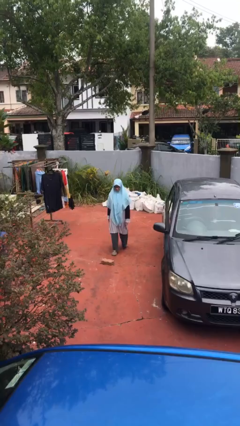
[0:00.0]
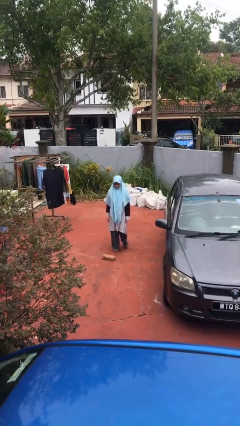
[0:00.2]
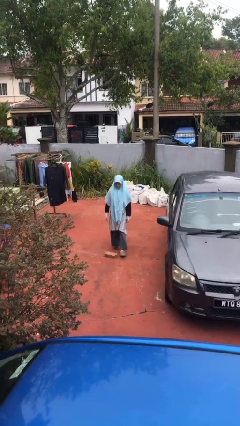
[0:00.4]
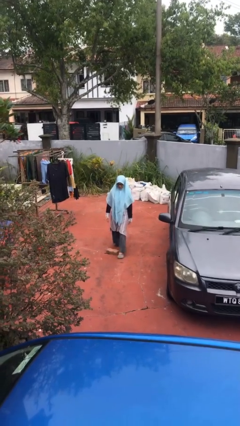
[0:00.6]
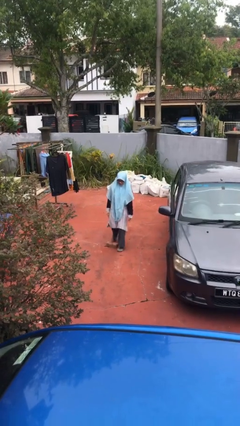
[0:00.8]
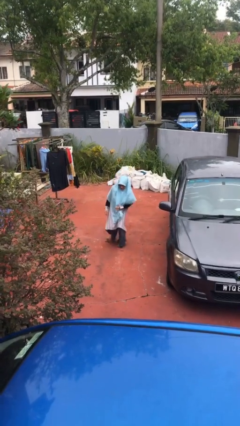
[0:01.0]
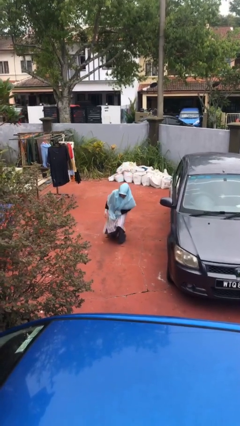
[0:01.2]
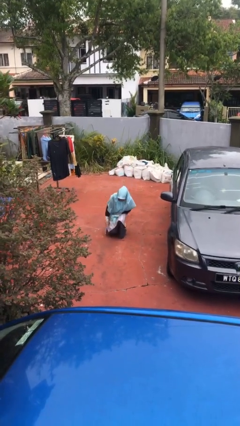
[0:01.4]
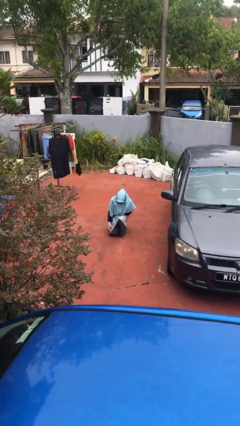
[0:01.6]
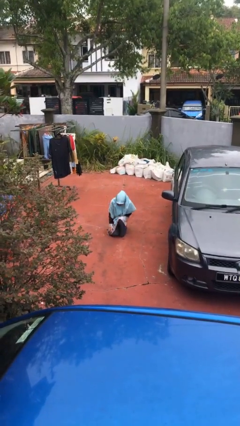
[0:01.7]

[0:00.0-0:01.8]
person trips on object on floor

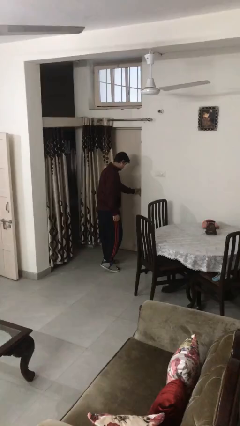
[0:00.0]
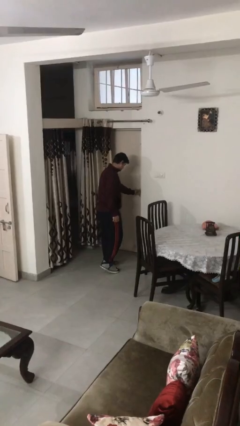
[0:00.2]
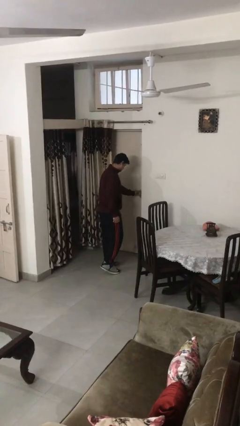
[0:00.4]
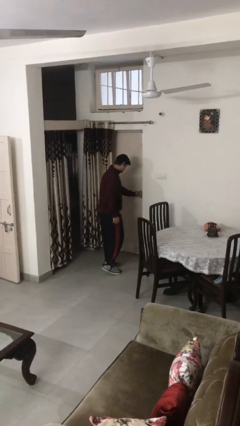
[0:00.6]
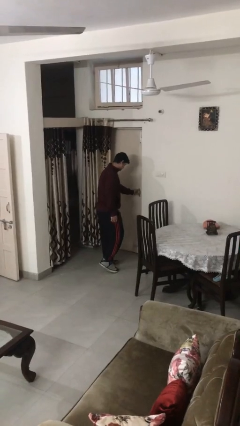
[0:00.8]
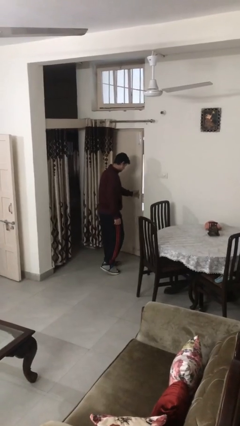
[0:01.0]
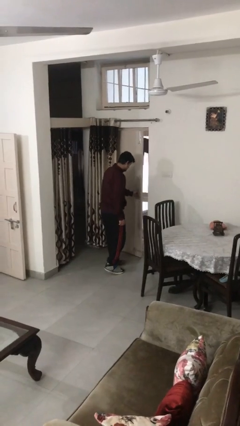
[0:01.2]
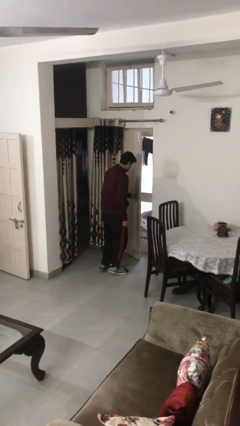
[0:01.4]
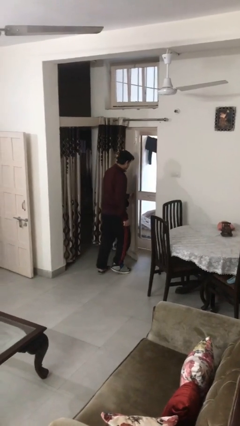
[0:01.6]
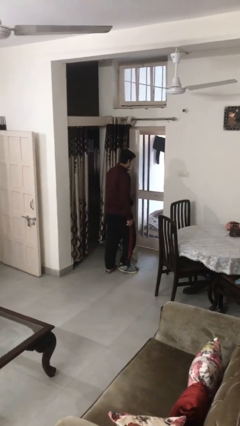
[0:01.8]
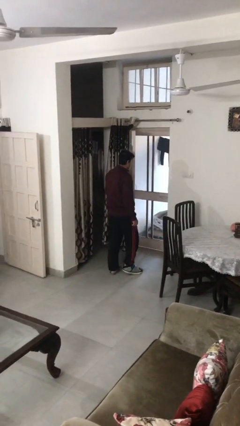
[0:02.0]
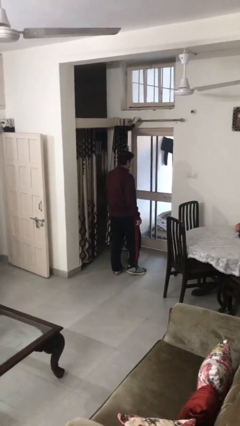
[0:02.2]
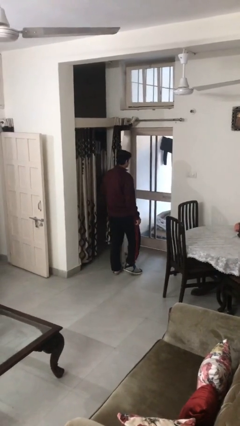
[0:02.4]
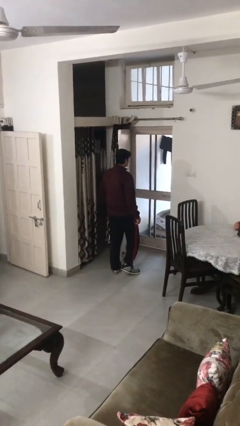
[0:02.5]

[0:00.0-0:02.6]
person opens facility door

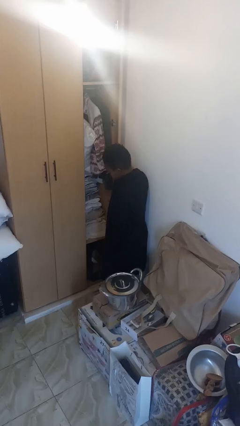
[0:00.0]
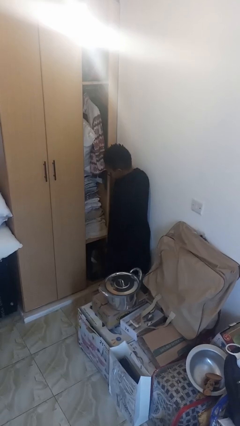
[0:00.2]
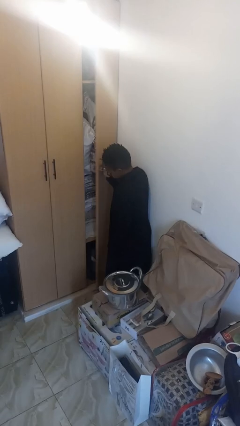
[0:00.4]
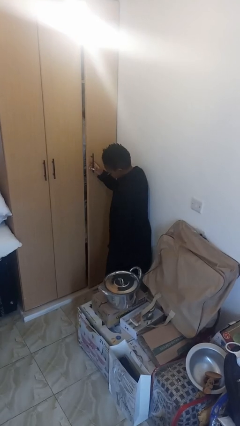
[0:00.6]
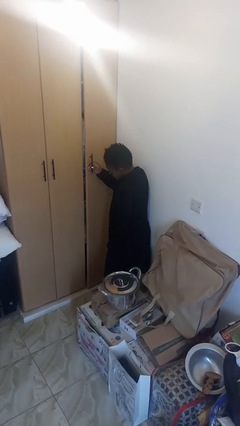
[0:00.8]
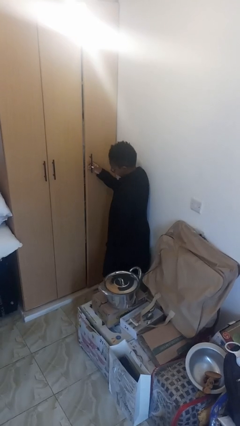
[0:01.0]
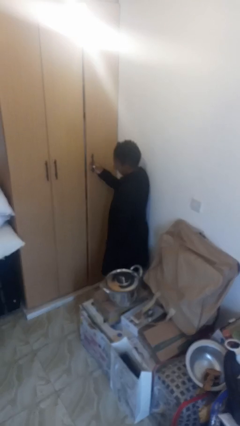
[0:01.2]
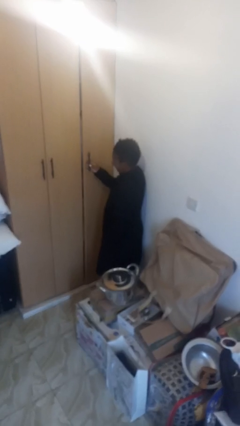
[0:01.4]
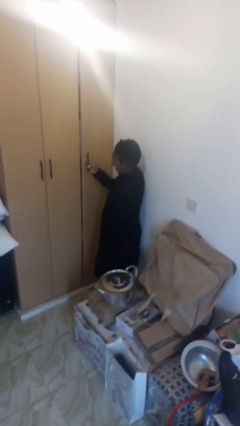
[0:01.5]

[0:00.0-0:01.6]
person closes closet door

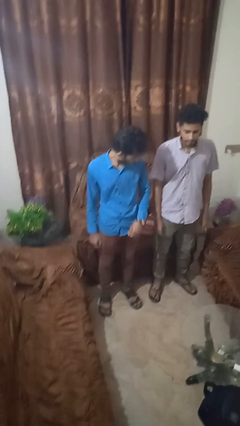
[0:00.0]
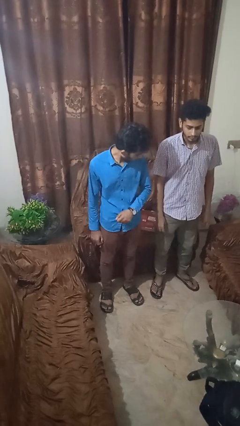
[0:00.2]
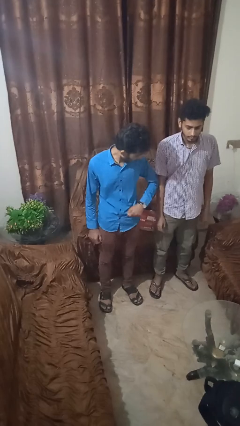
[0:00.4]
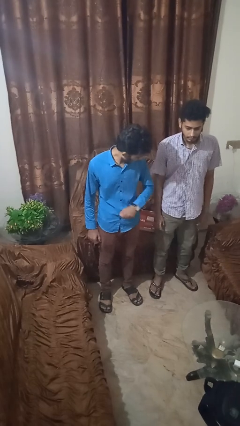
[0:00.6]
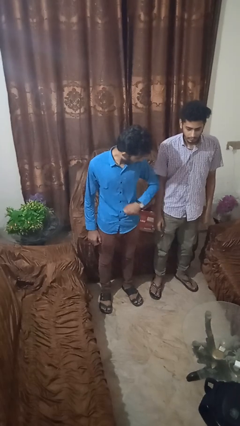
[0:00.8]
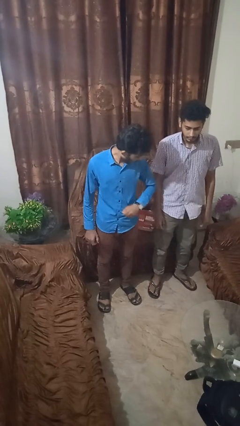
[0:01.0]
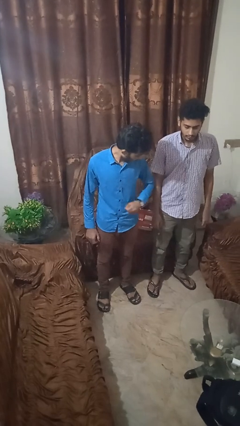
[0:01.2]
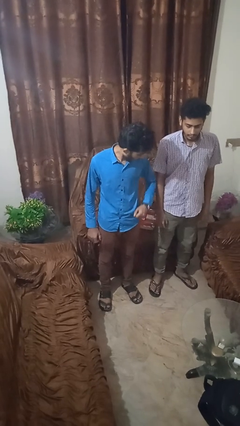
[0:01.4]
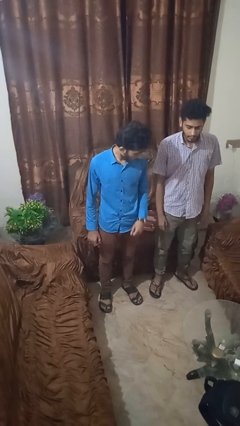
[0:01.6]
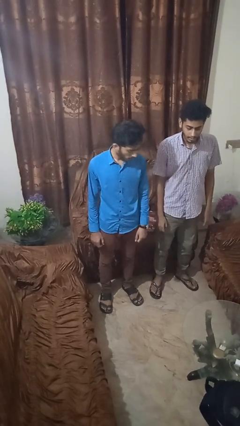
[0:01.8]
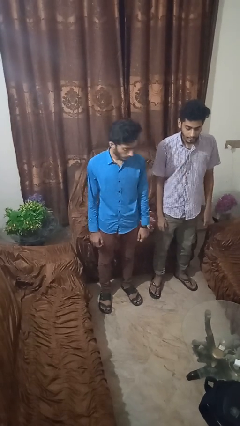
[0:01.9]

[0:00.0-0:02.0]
person nudges person with elbow

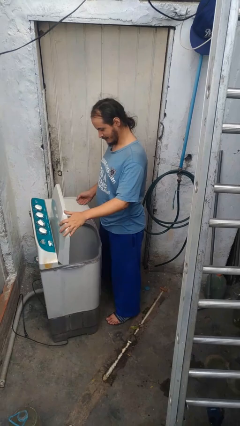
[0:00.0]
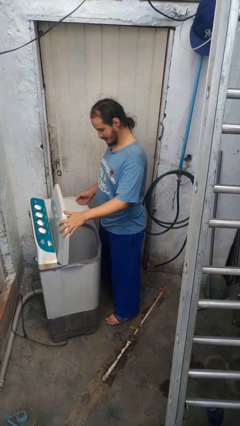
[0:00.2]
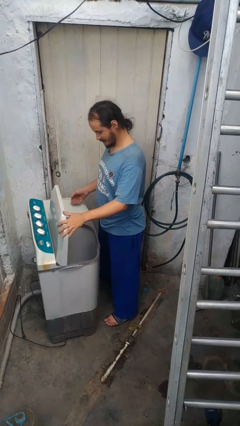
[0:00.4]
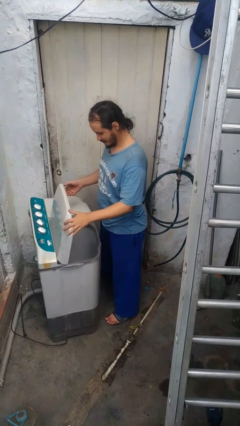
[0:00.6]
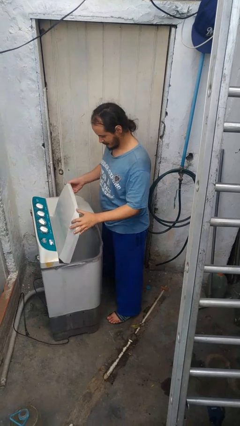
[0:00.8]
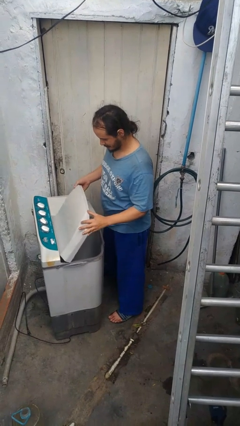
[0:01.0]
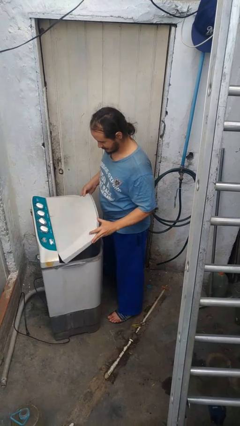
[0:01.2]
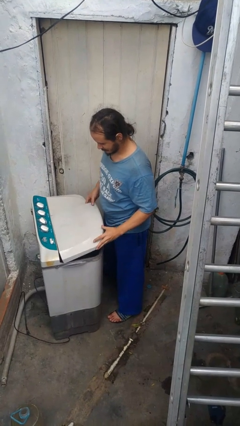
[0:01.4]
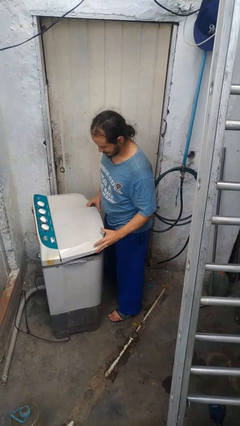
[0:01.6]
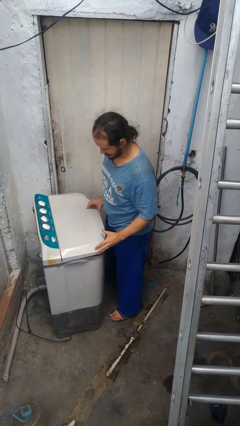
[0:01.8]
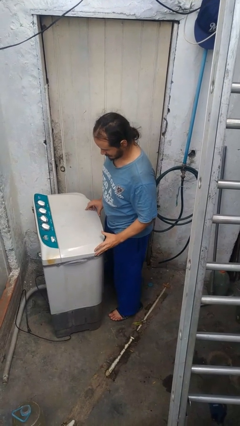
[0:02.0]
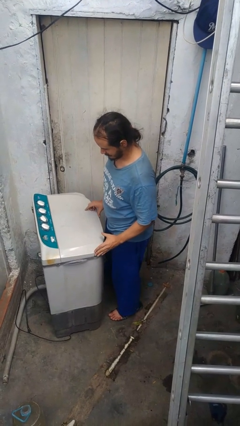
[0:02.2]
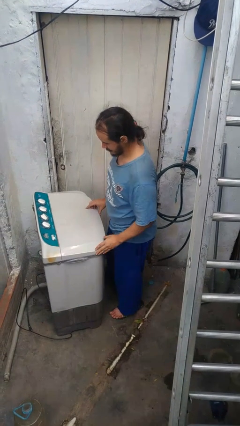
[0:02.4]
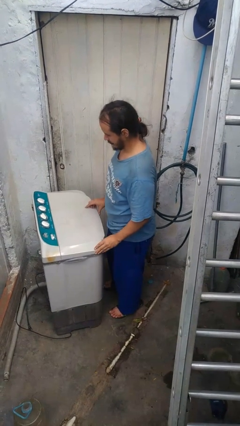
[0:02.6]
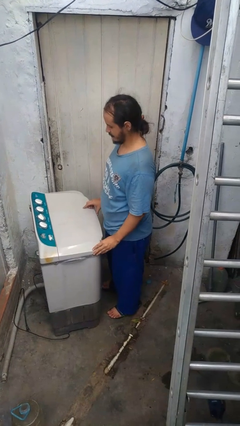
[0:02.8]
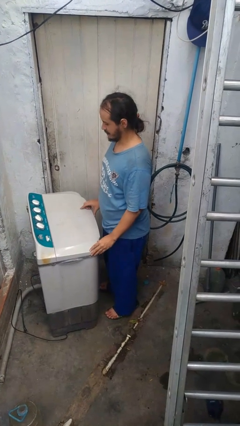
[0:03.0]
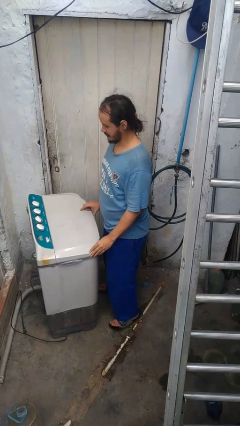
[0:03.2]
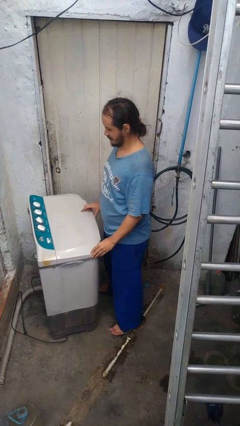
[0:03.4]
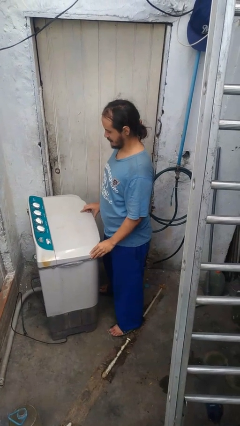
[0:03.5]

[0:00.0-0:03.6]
person closes clothes washer

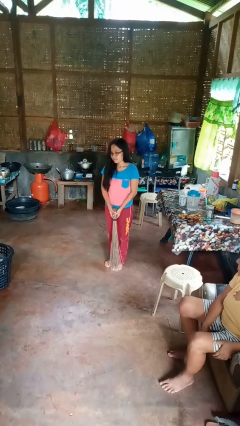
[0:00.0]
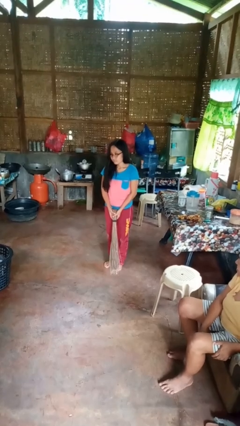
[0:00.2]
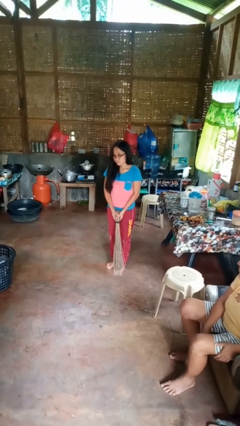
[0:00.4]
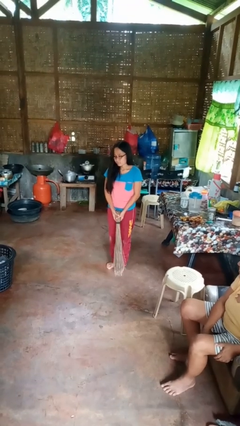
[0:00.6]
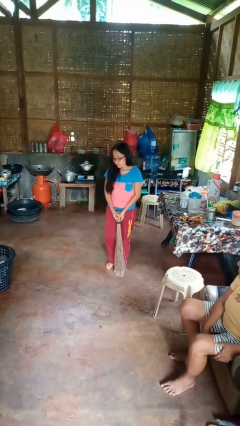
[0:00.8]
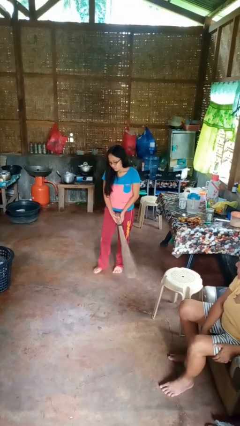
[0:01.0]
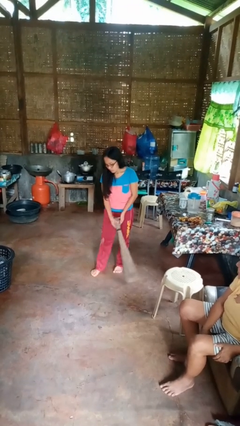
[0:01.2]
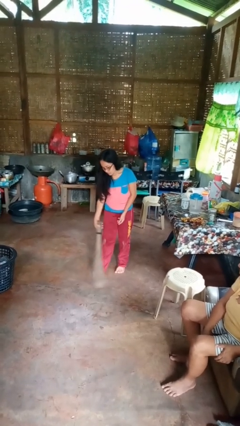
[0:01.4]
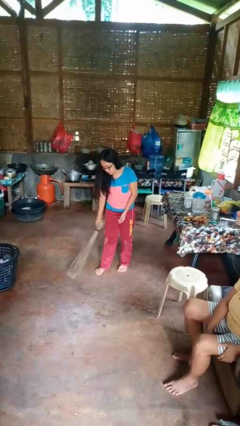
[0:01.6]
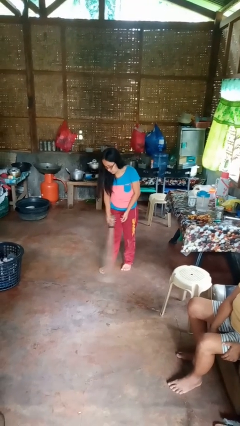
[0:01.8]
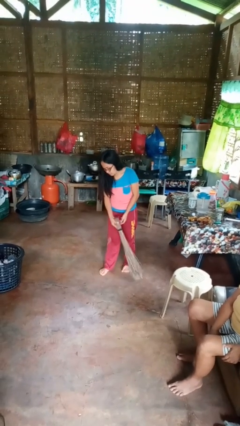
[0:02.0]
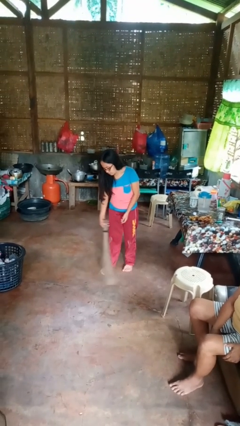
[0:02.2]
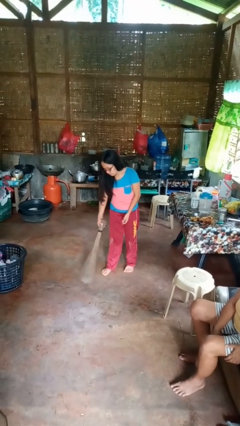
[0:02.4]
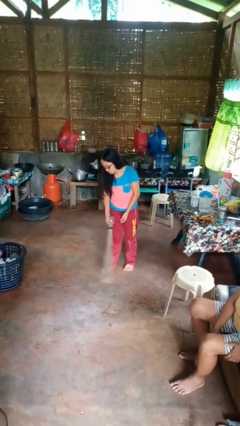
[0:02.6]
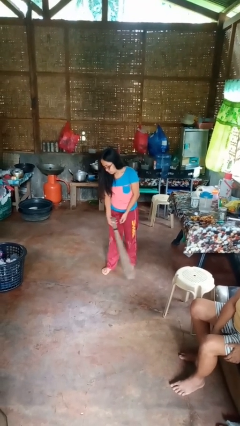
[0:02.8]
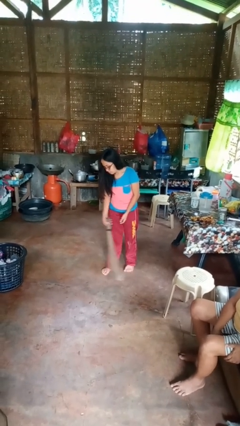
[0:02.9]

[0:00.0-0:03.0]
person sweeps floor

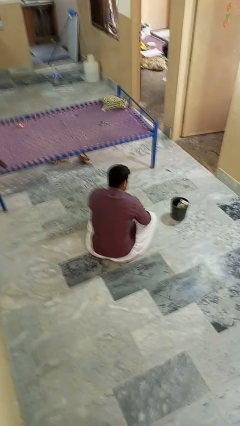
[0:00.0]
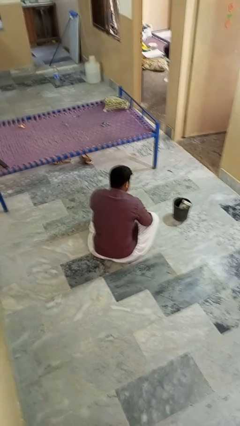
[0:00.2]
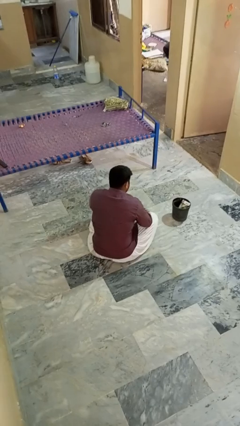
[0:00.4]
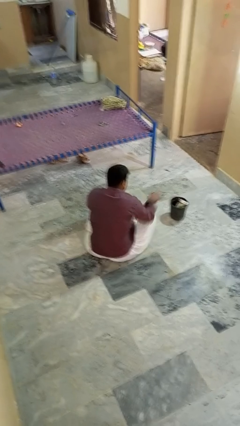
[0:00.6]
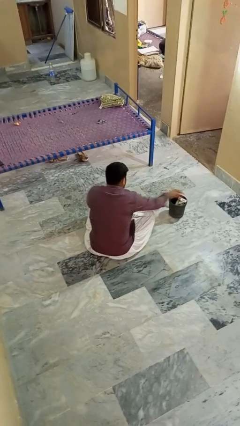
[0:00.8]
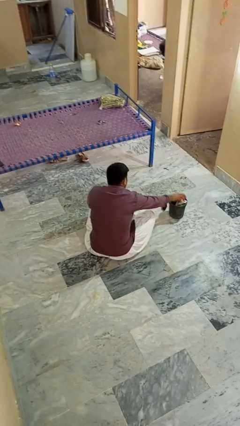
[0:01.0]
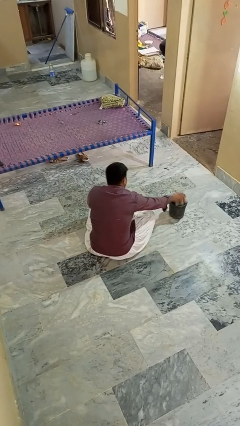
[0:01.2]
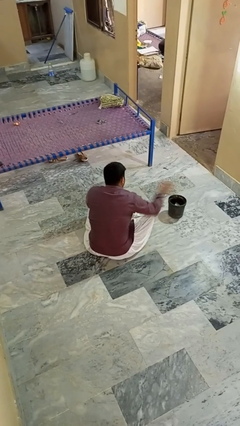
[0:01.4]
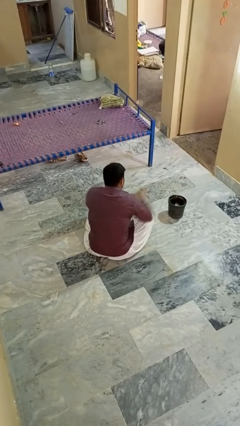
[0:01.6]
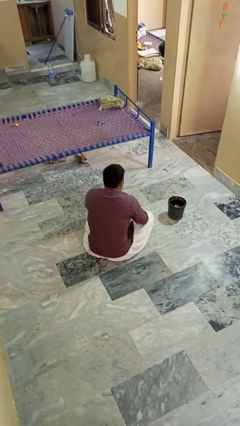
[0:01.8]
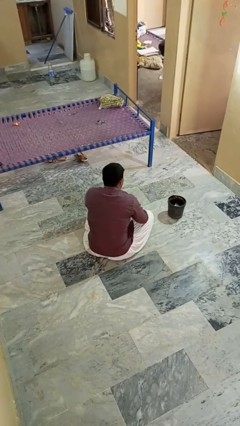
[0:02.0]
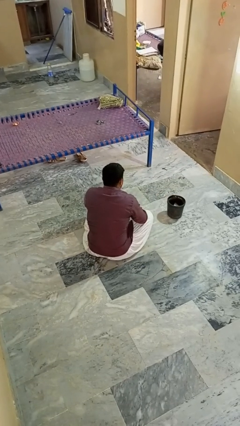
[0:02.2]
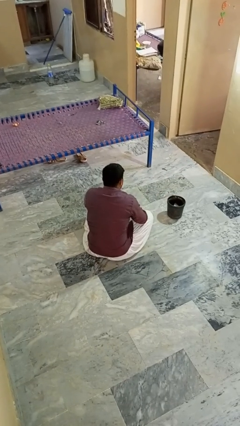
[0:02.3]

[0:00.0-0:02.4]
person takes object from basket

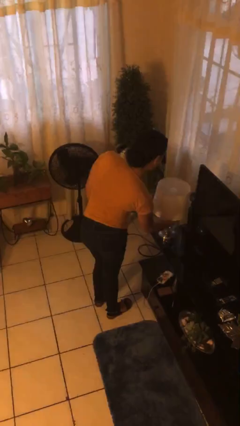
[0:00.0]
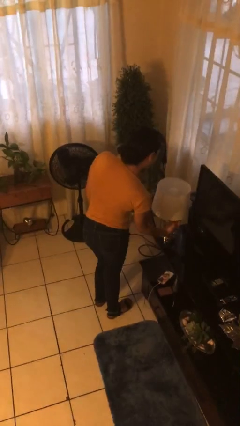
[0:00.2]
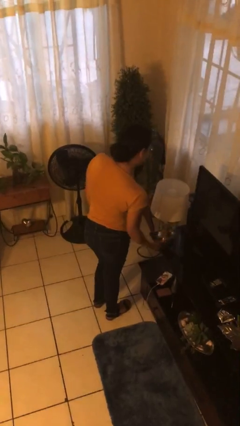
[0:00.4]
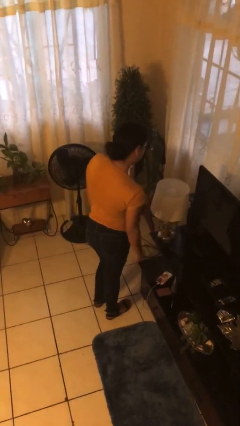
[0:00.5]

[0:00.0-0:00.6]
person turns off lamp
